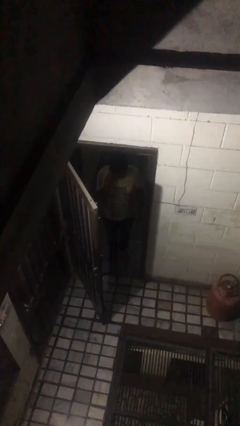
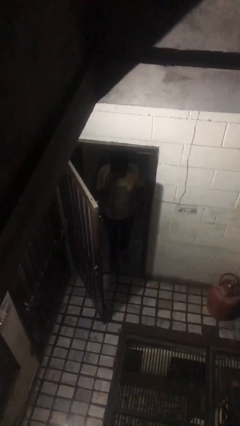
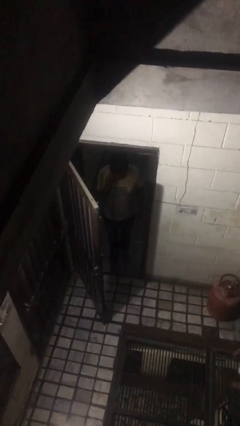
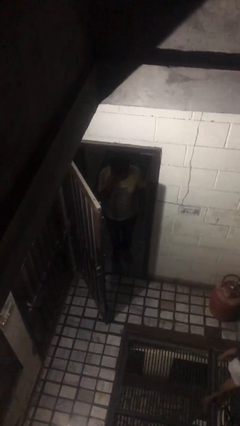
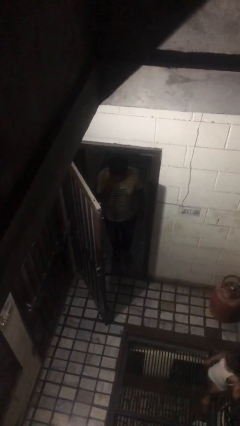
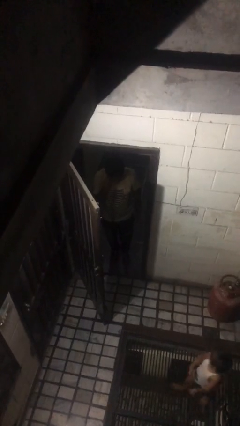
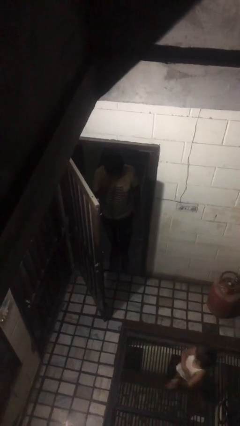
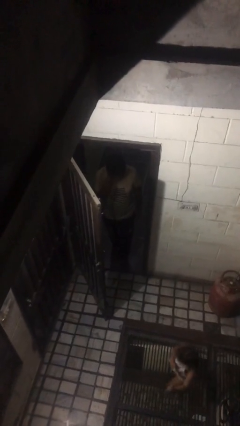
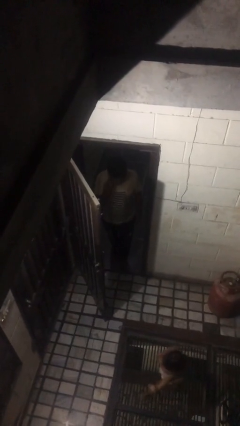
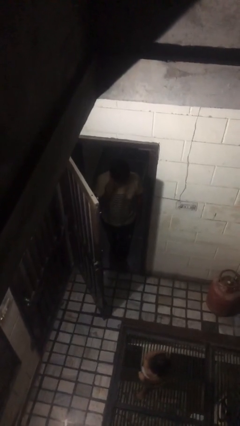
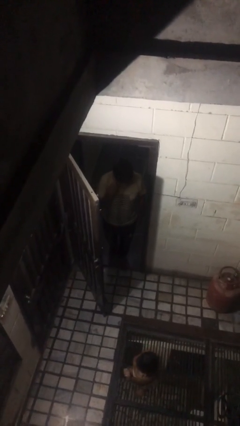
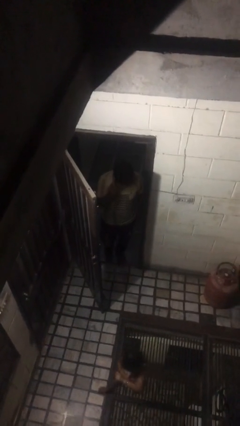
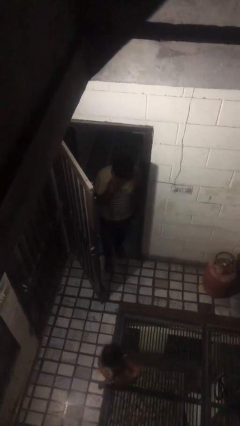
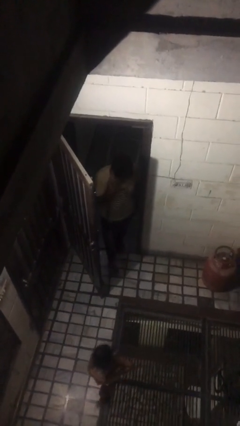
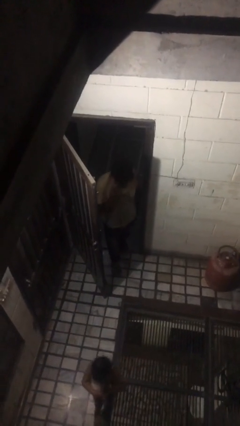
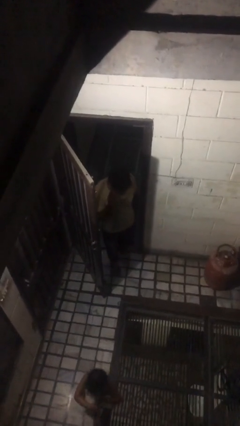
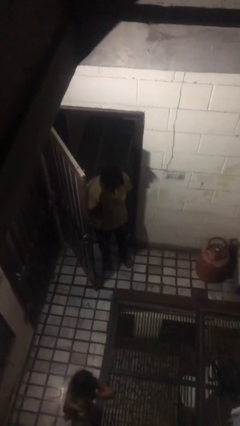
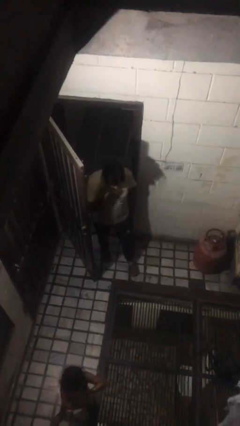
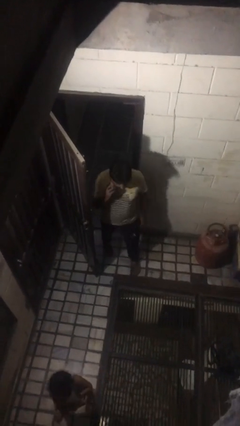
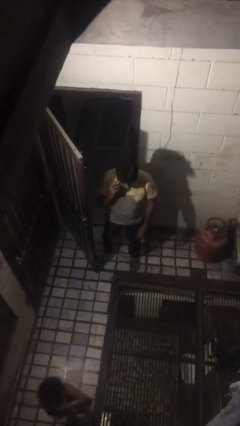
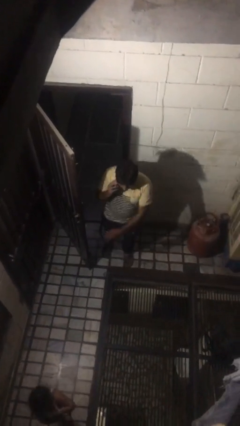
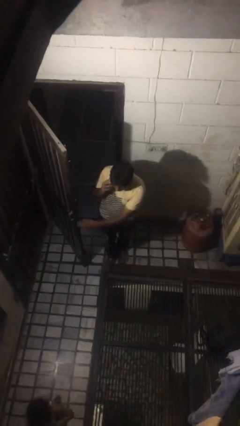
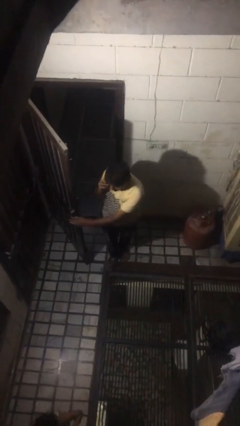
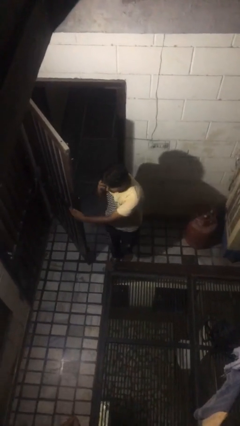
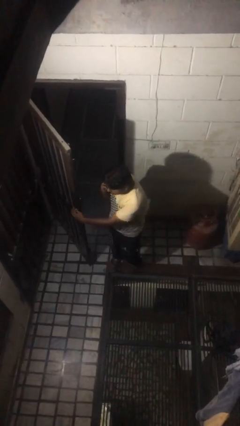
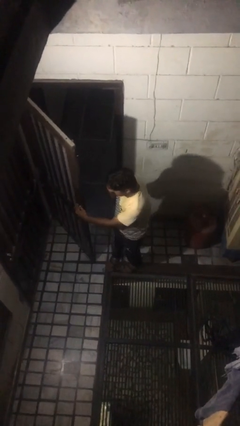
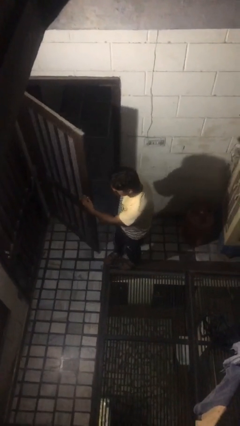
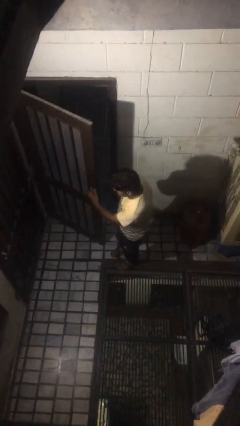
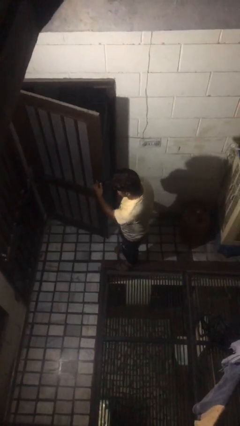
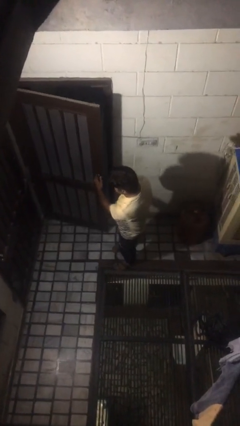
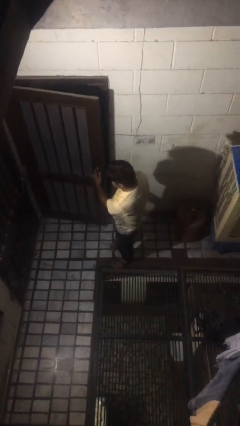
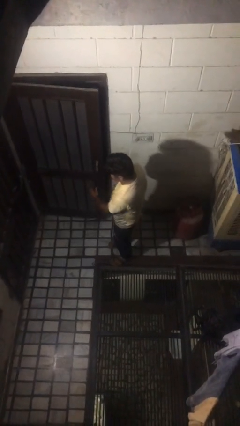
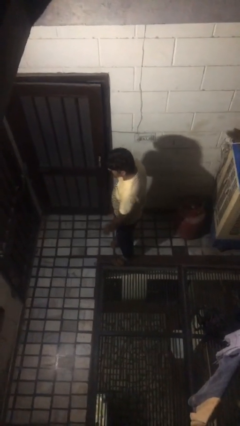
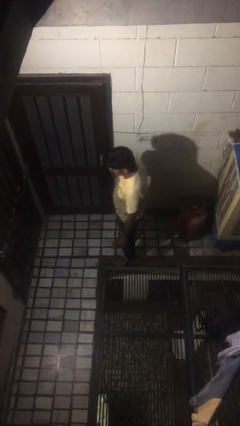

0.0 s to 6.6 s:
person exits scene through structure

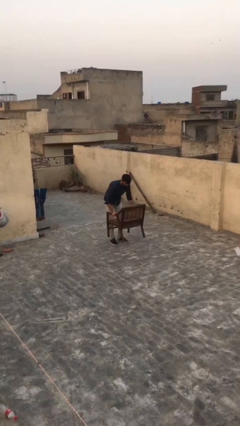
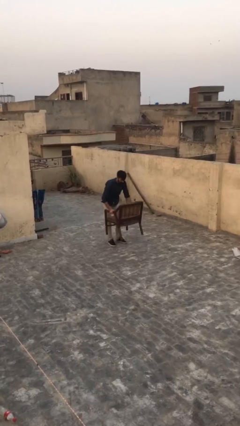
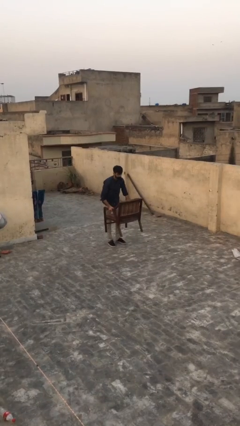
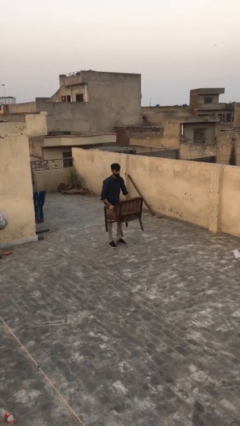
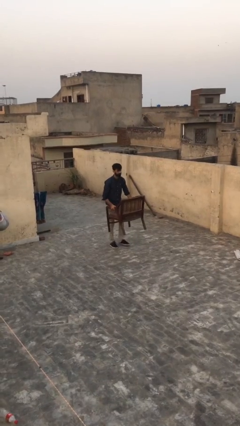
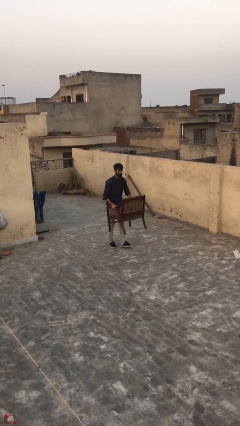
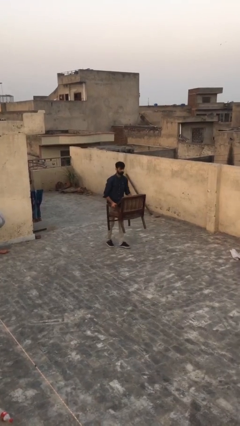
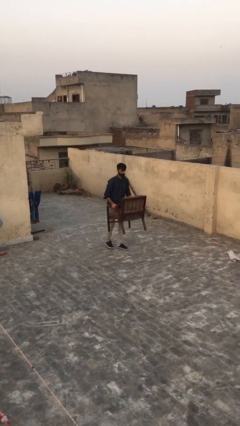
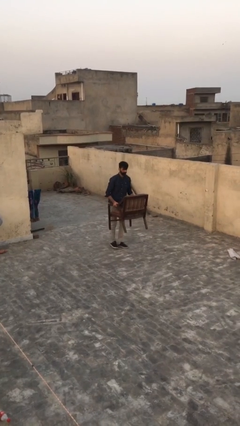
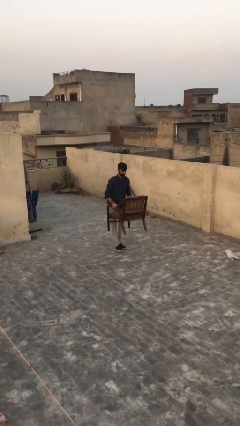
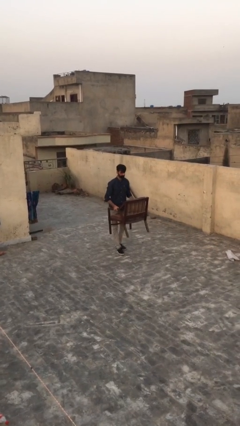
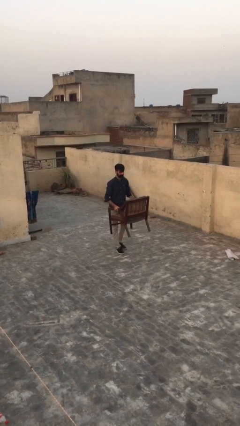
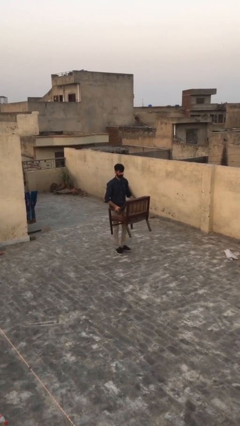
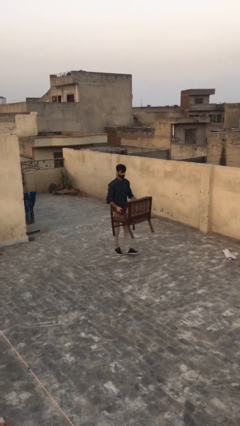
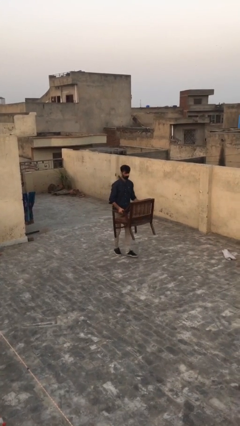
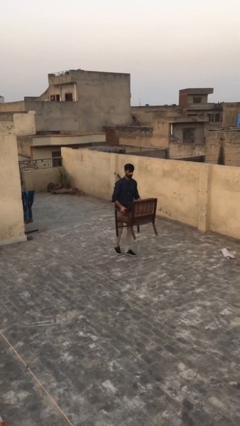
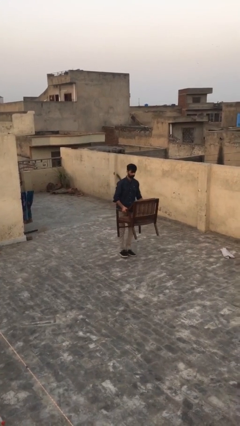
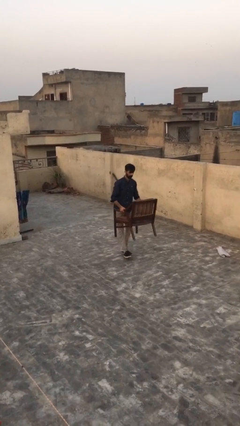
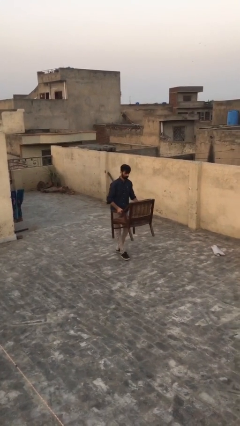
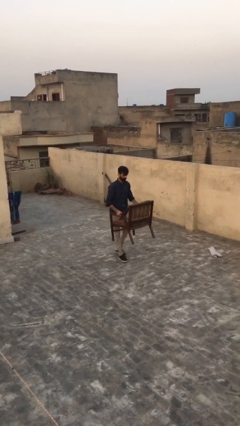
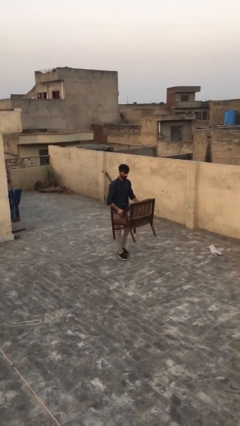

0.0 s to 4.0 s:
person carries heavy object

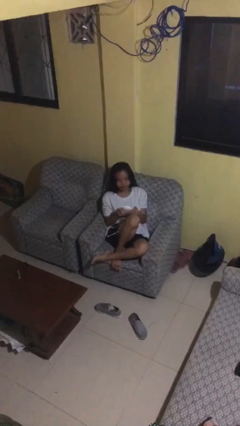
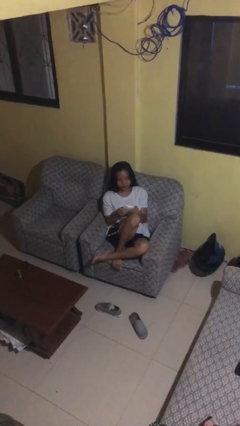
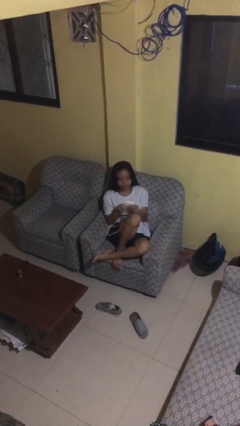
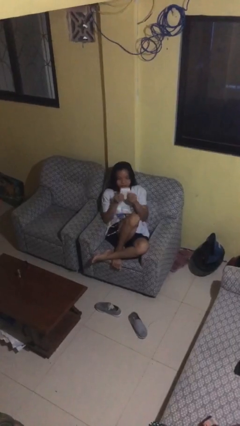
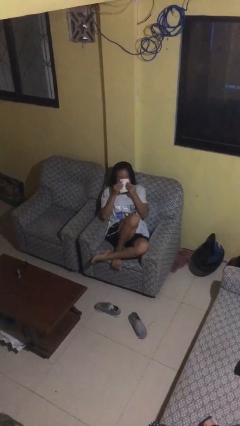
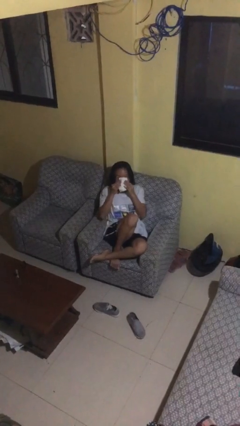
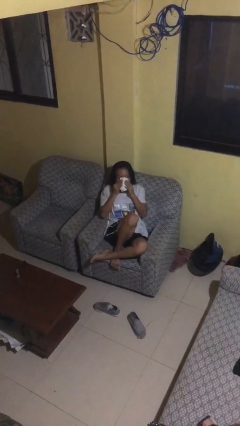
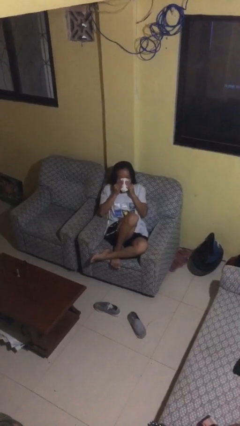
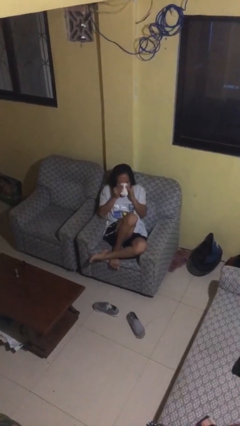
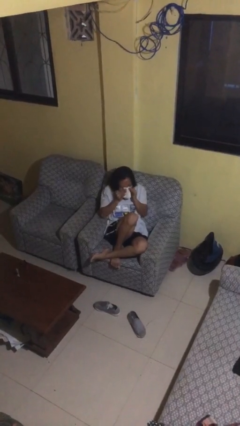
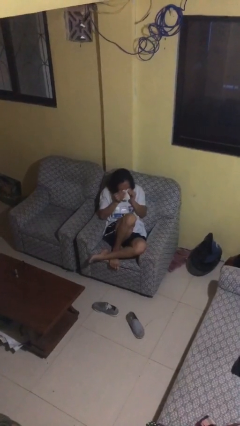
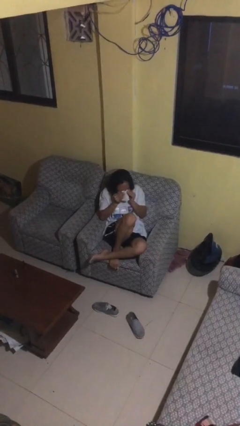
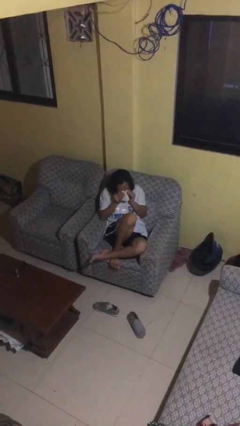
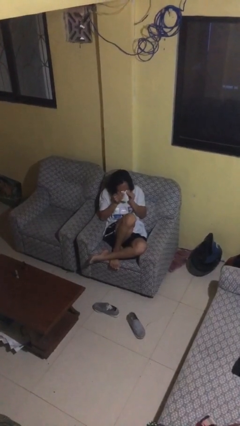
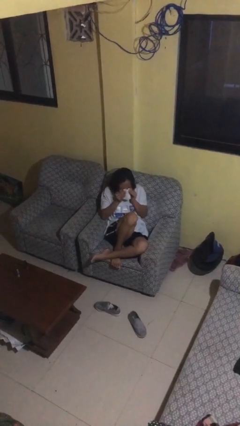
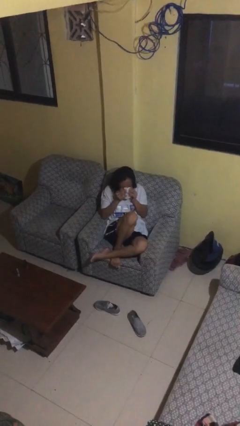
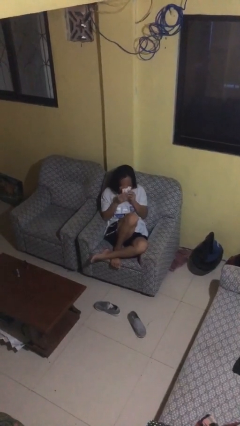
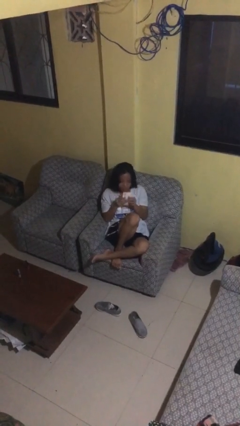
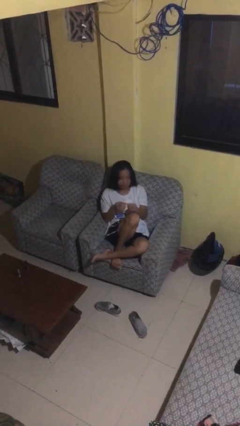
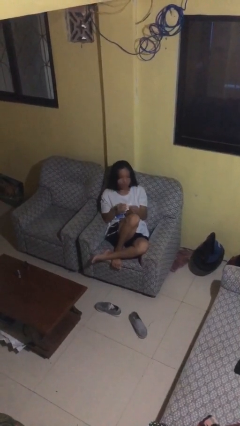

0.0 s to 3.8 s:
person blows nose

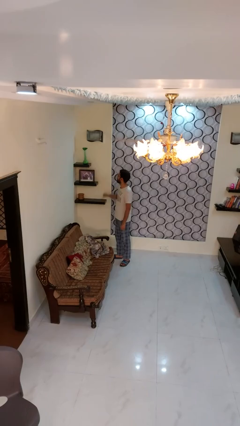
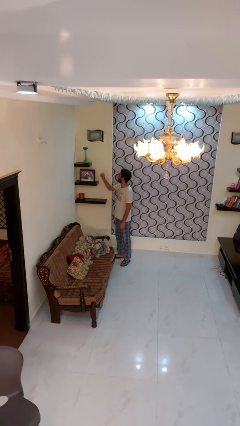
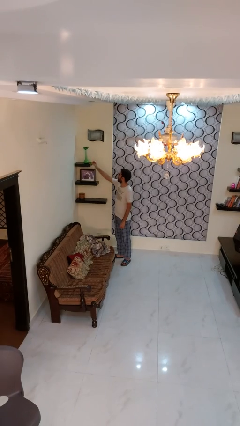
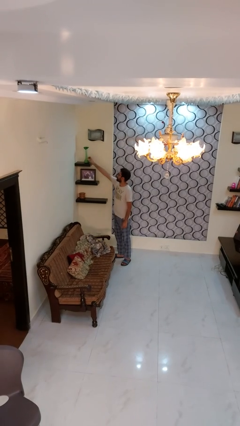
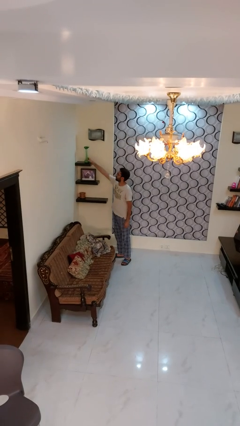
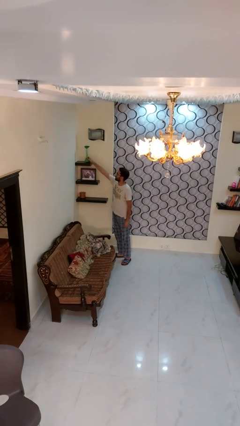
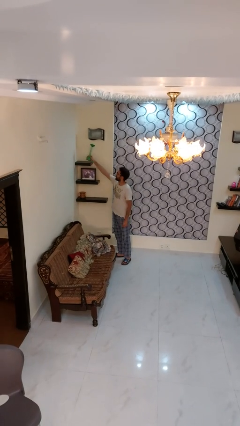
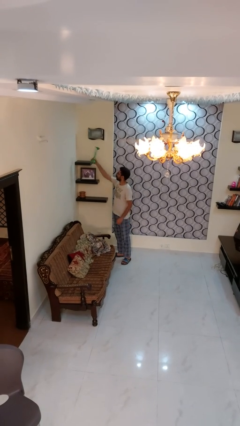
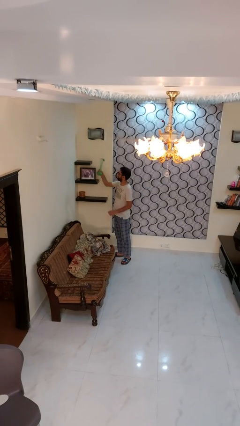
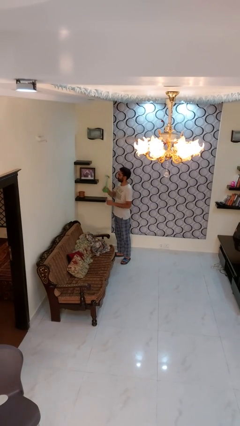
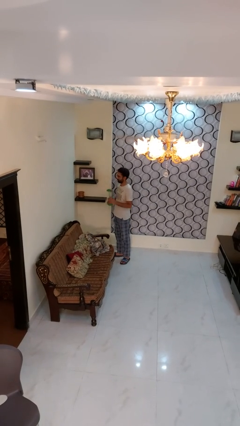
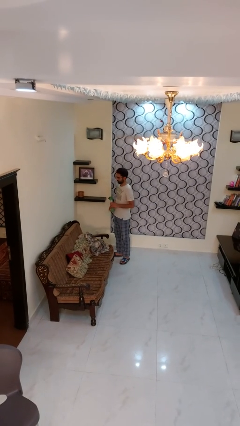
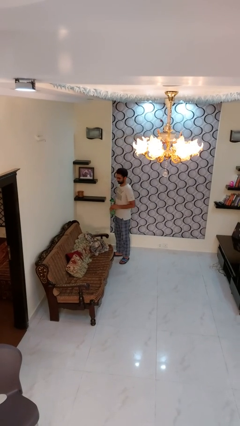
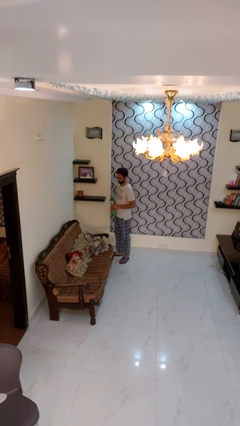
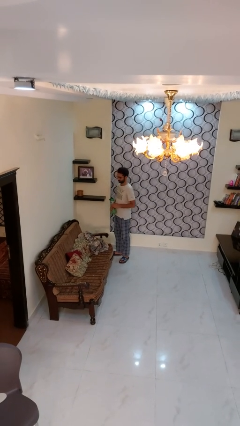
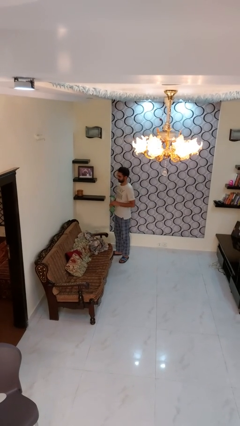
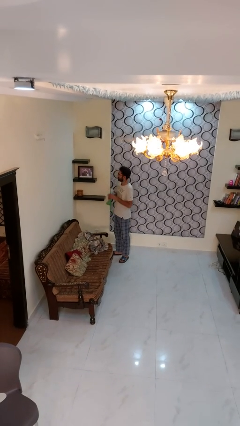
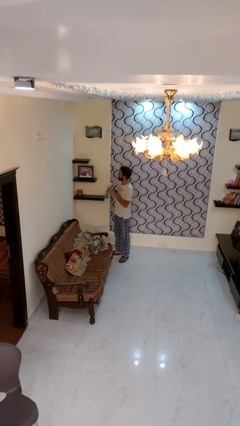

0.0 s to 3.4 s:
person picks up object from shelf

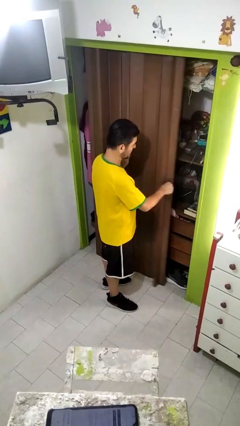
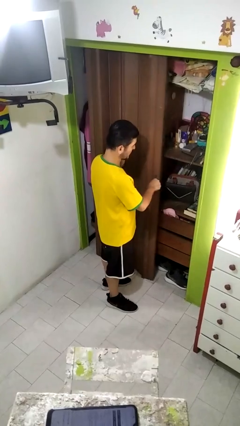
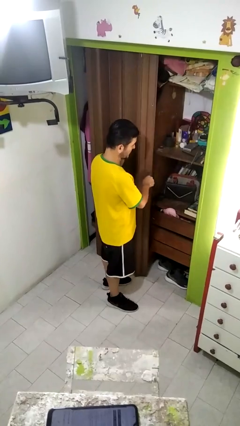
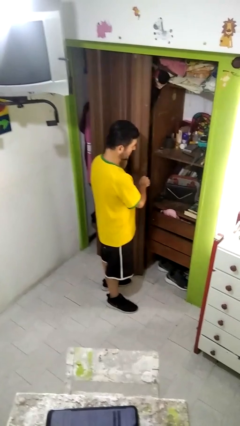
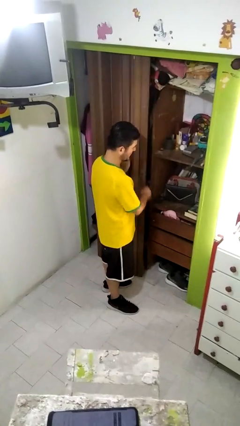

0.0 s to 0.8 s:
person opens closet door
